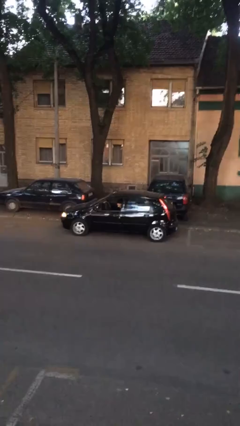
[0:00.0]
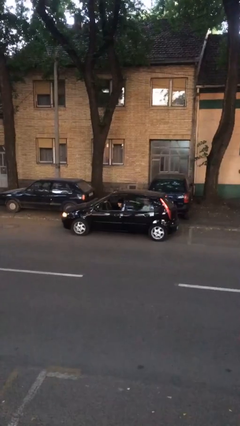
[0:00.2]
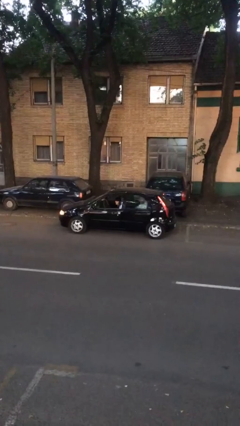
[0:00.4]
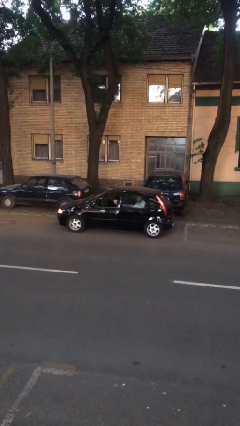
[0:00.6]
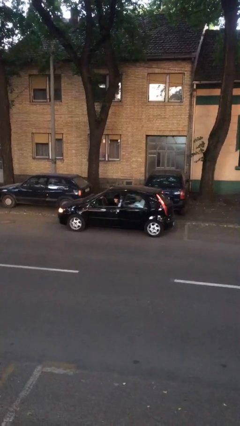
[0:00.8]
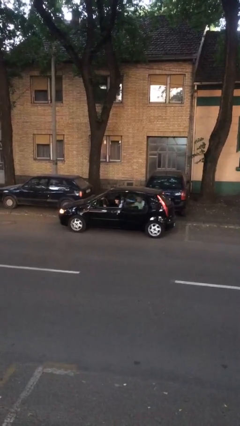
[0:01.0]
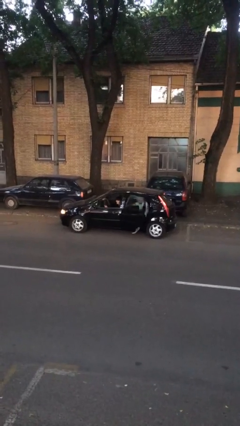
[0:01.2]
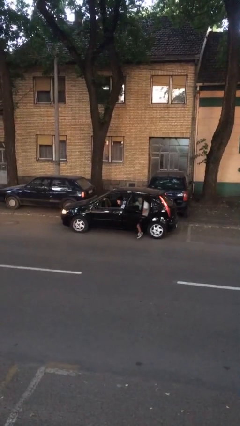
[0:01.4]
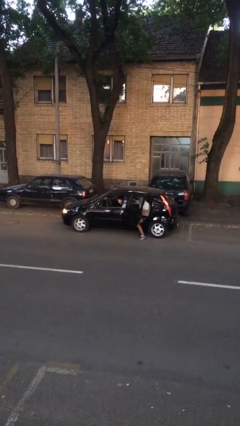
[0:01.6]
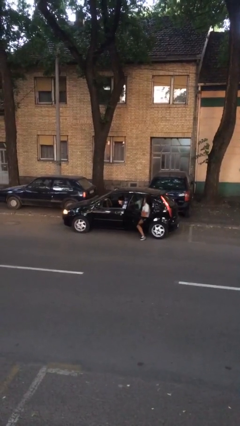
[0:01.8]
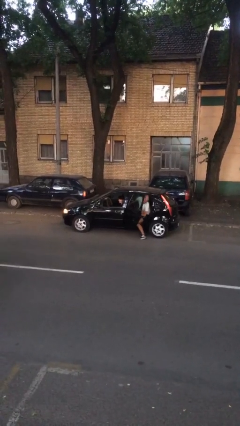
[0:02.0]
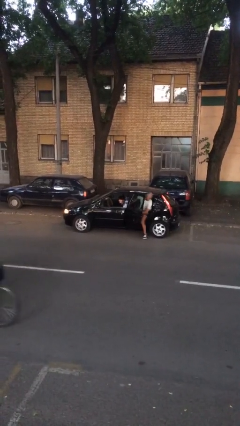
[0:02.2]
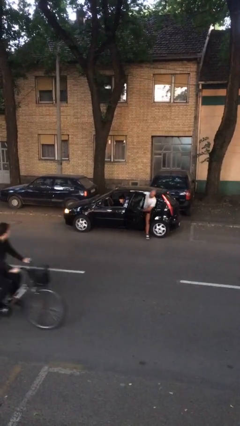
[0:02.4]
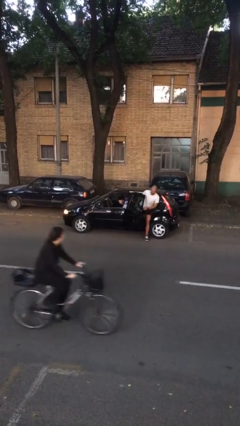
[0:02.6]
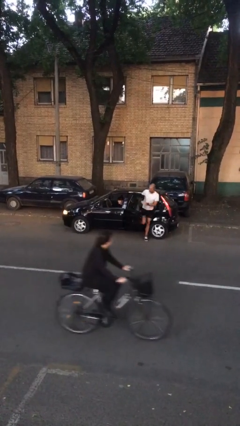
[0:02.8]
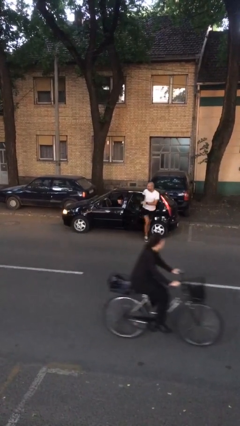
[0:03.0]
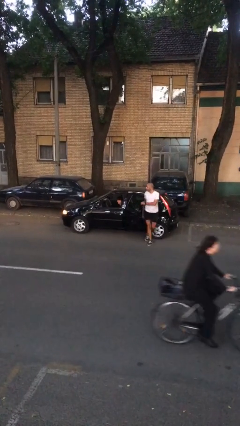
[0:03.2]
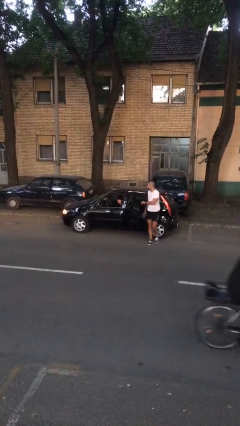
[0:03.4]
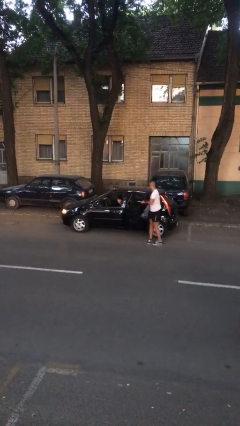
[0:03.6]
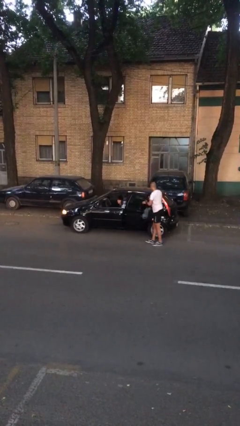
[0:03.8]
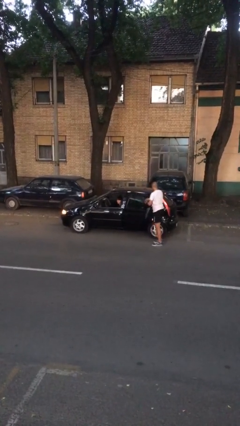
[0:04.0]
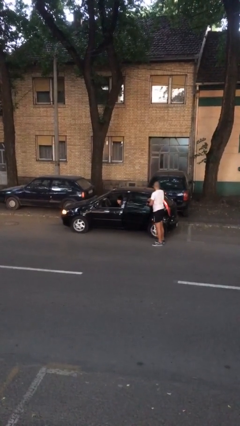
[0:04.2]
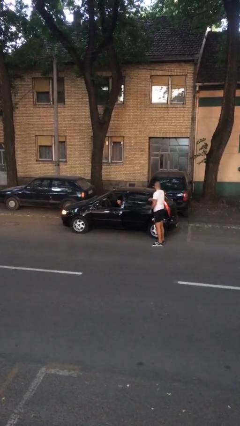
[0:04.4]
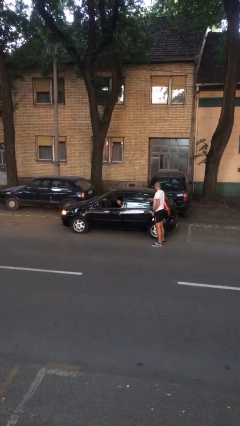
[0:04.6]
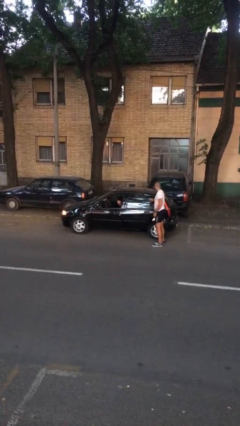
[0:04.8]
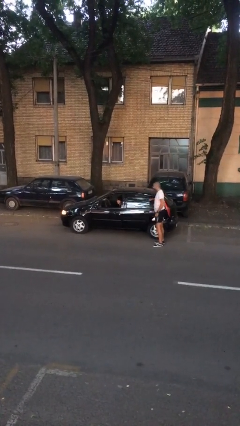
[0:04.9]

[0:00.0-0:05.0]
car drops off person

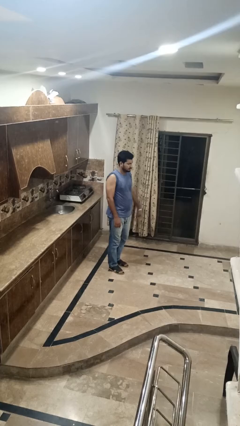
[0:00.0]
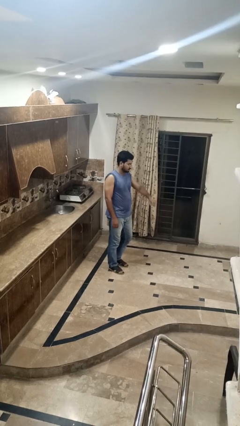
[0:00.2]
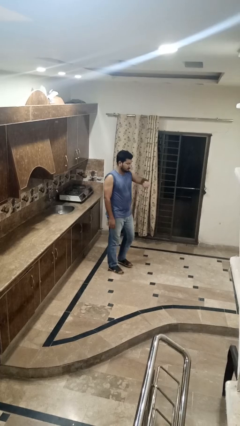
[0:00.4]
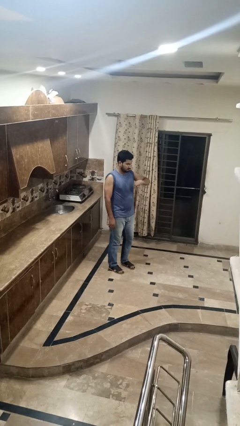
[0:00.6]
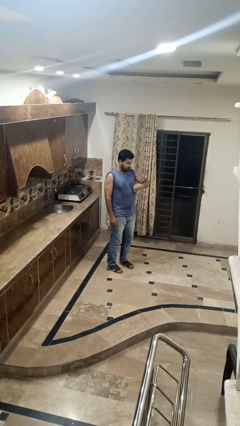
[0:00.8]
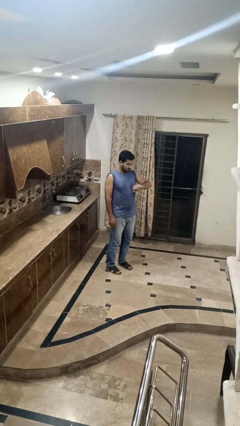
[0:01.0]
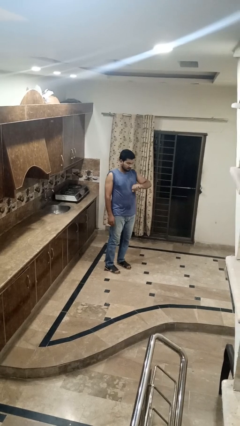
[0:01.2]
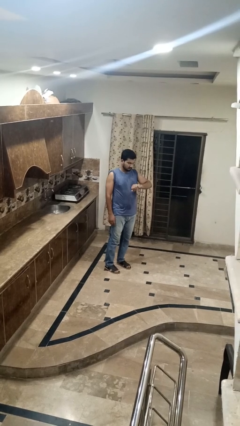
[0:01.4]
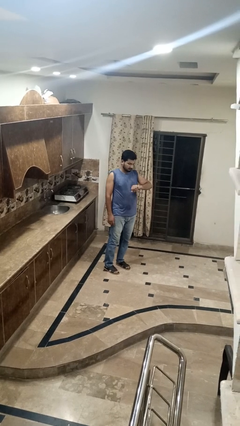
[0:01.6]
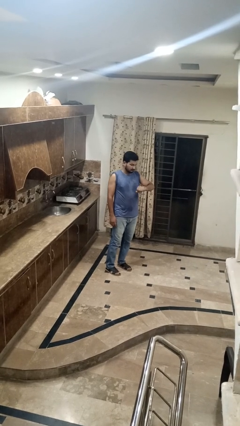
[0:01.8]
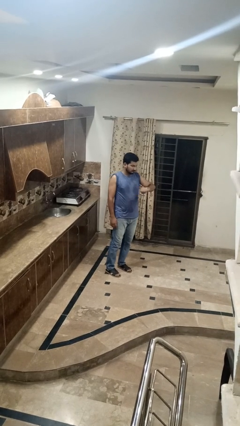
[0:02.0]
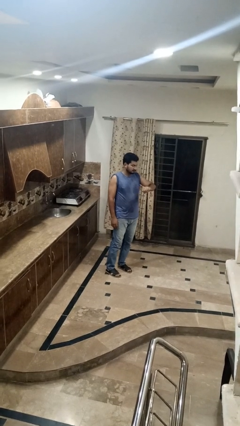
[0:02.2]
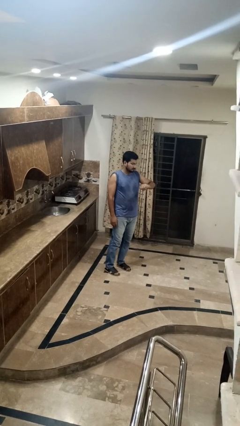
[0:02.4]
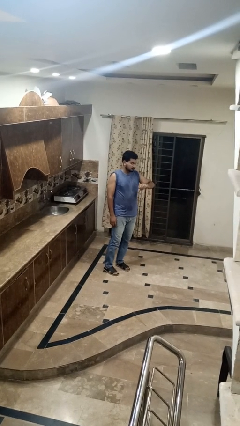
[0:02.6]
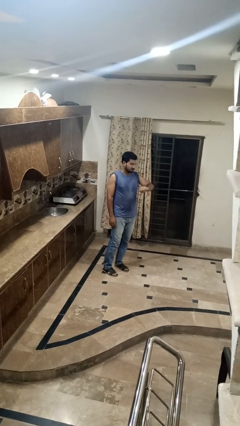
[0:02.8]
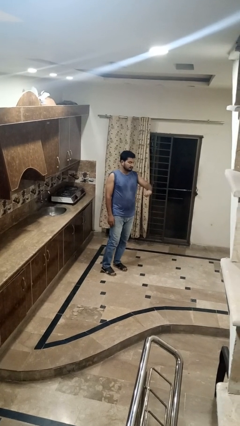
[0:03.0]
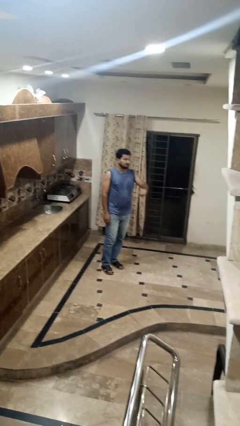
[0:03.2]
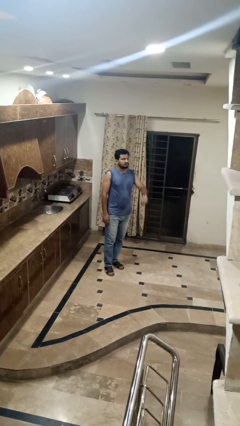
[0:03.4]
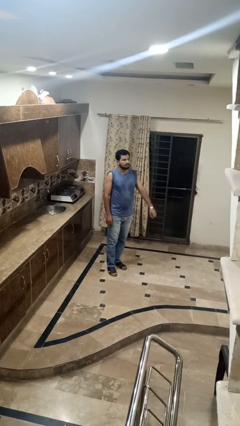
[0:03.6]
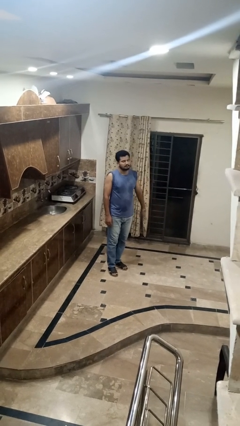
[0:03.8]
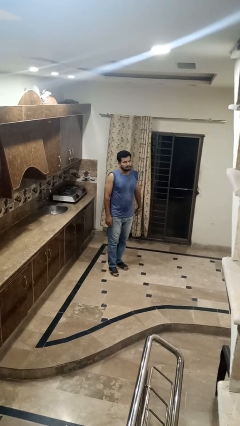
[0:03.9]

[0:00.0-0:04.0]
person looks at wristwatch

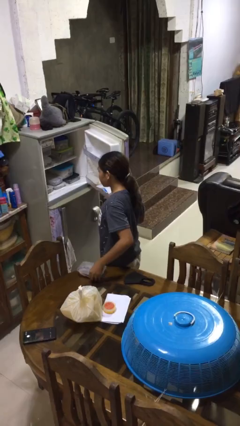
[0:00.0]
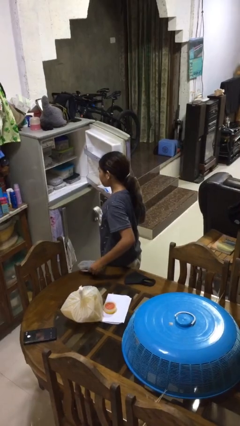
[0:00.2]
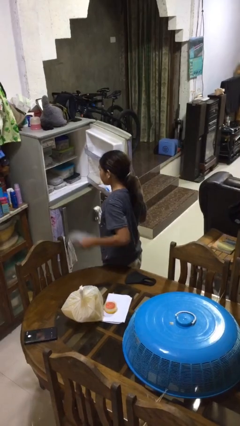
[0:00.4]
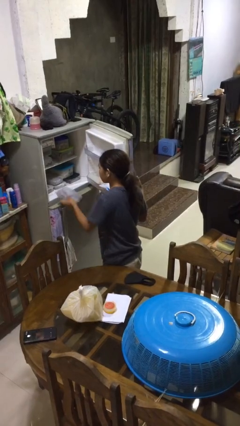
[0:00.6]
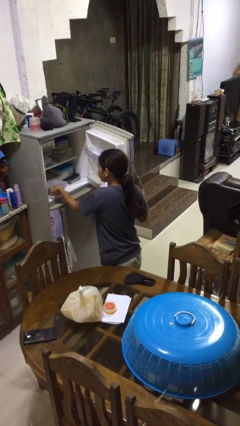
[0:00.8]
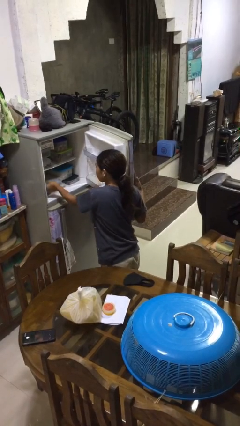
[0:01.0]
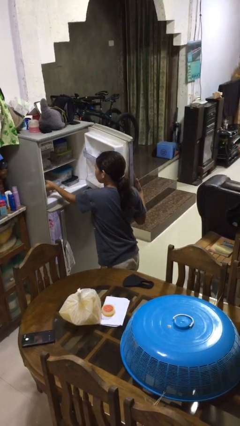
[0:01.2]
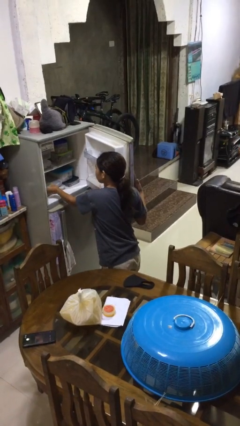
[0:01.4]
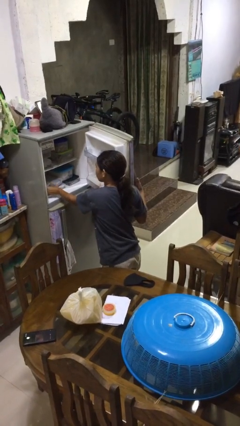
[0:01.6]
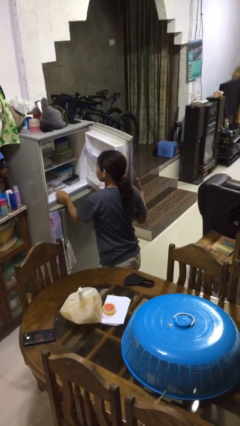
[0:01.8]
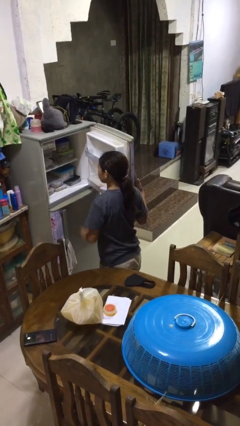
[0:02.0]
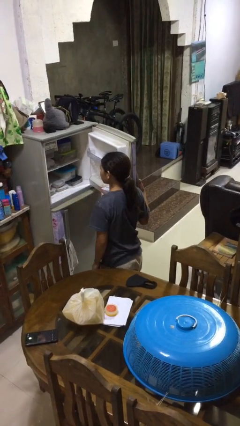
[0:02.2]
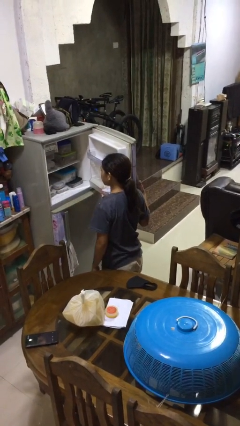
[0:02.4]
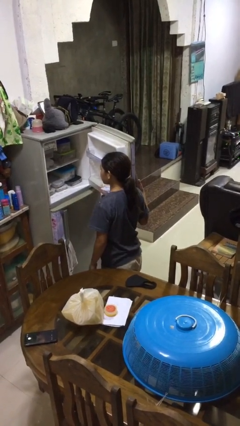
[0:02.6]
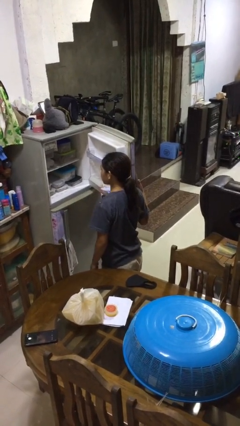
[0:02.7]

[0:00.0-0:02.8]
person puts object into refrigerator

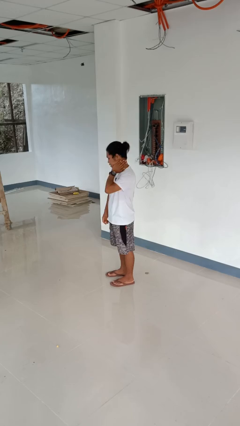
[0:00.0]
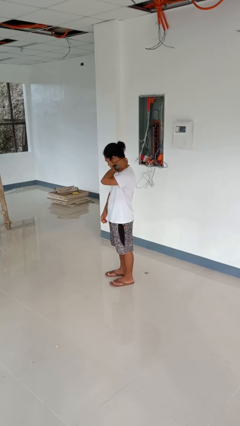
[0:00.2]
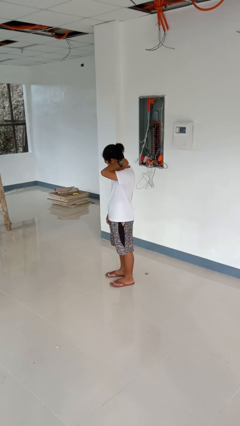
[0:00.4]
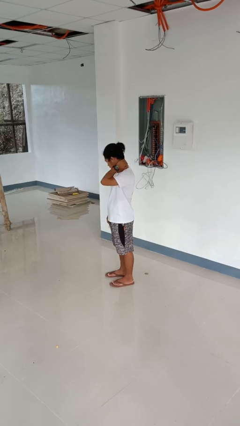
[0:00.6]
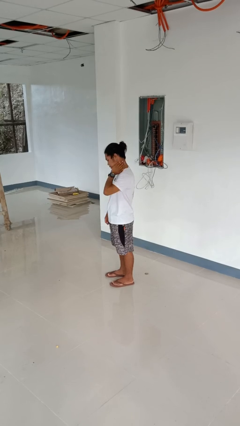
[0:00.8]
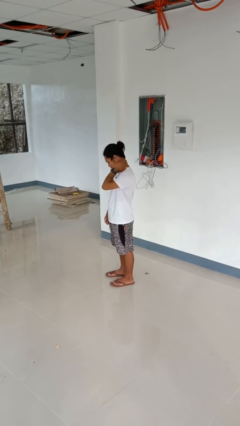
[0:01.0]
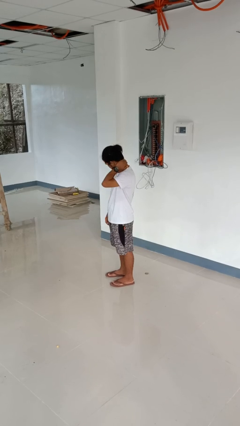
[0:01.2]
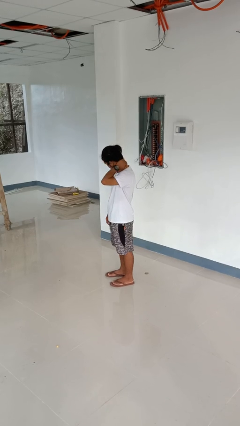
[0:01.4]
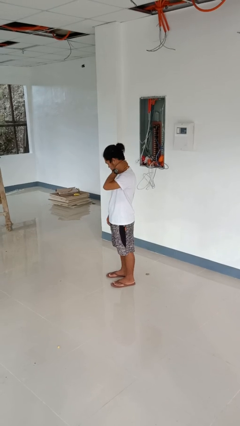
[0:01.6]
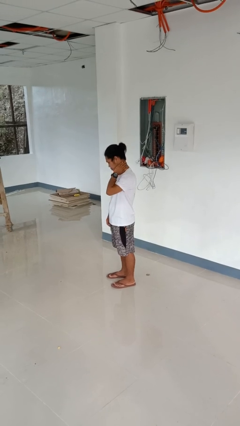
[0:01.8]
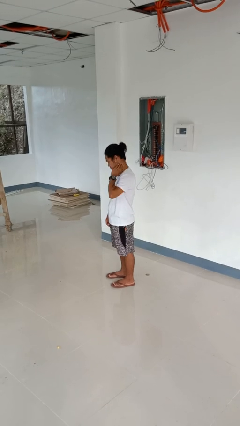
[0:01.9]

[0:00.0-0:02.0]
person rubs neck

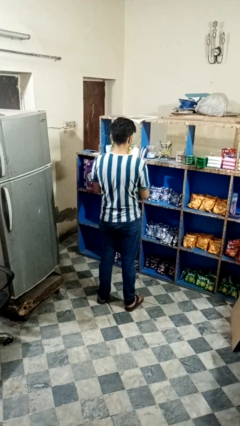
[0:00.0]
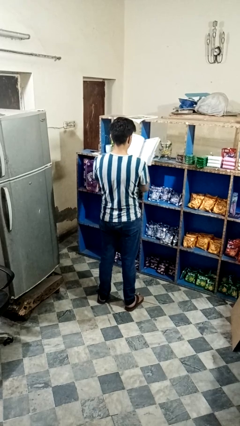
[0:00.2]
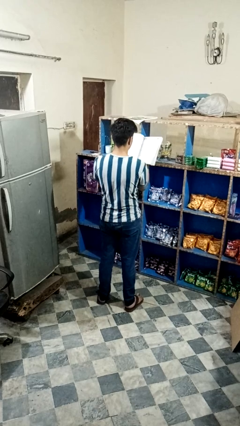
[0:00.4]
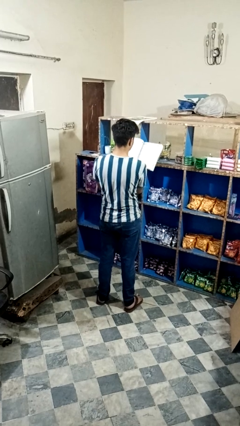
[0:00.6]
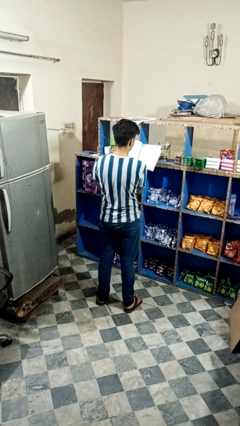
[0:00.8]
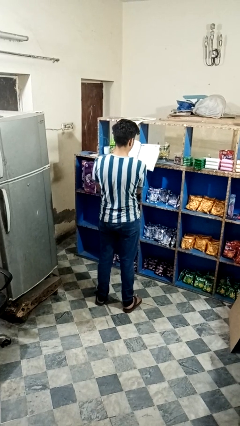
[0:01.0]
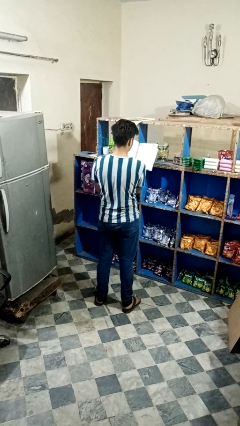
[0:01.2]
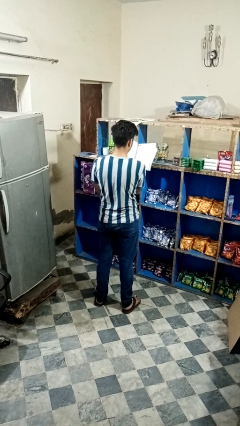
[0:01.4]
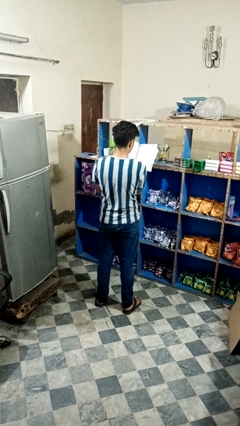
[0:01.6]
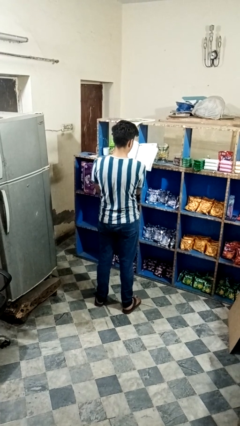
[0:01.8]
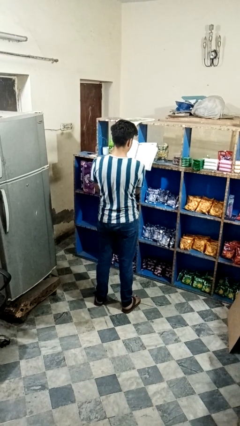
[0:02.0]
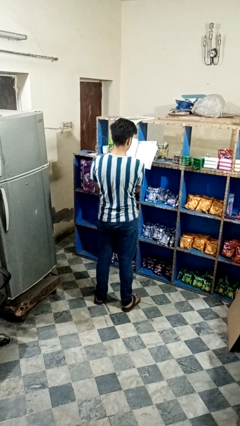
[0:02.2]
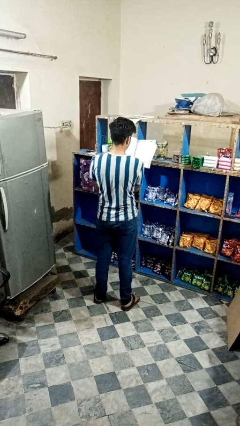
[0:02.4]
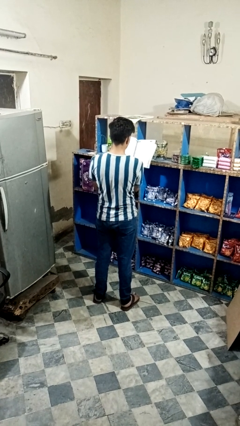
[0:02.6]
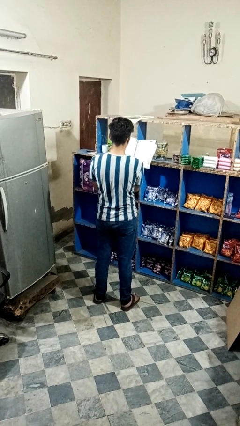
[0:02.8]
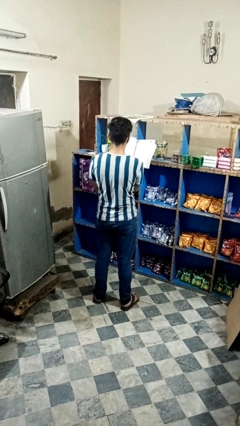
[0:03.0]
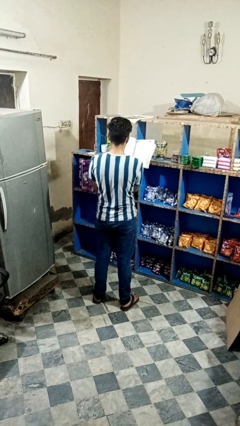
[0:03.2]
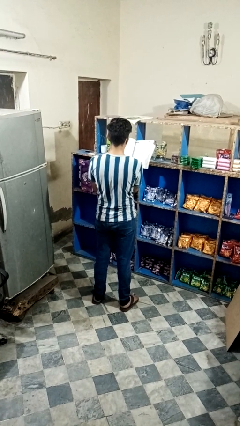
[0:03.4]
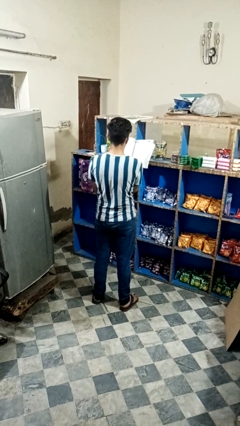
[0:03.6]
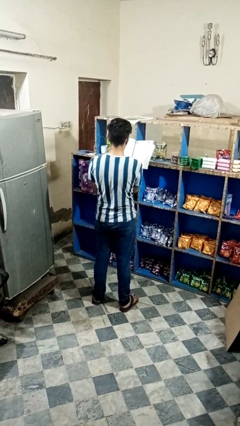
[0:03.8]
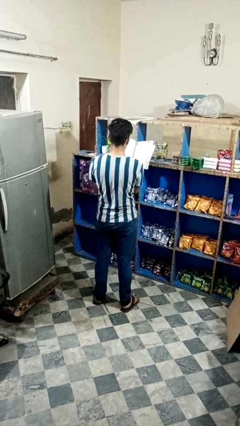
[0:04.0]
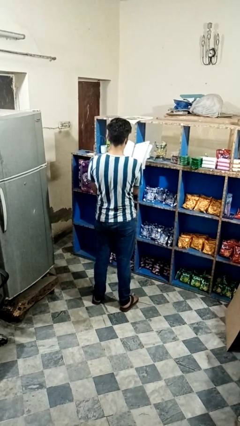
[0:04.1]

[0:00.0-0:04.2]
person reads book
